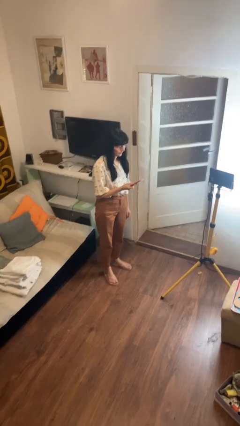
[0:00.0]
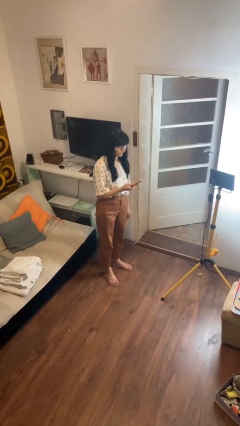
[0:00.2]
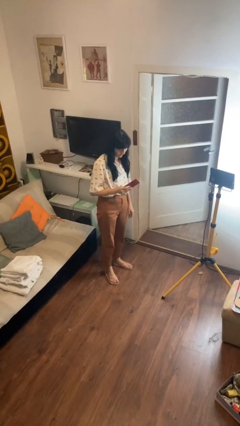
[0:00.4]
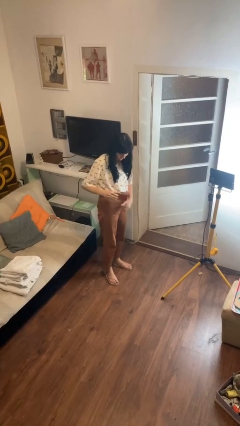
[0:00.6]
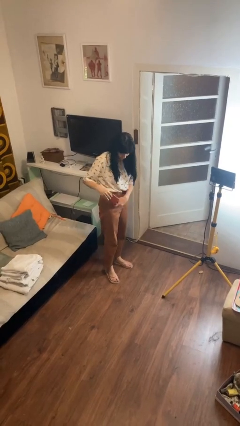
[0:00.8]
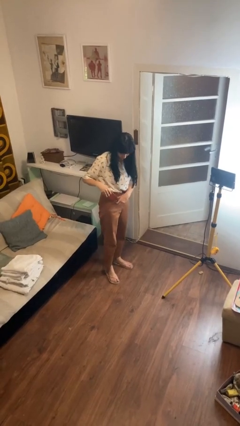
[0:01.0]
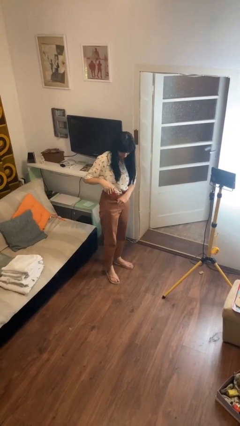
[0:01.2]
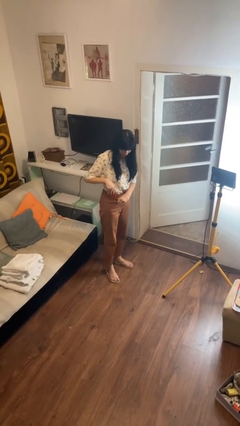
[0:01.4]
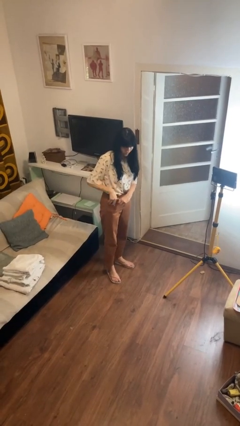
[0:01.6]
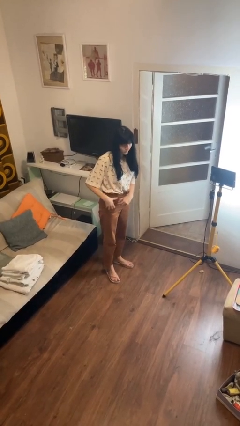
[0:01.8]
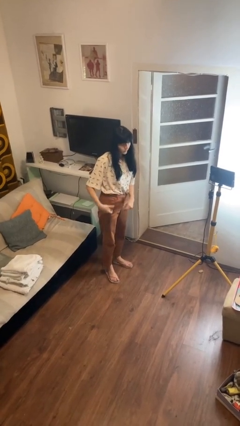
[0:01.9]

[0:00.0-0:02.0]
person puts phone into pocket

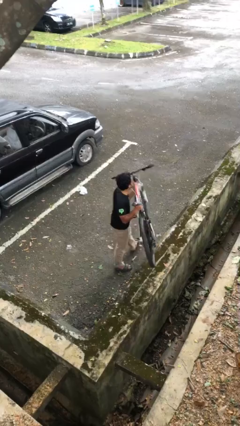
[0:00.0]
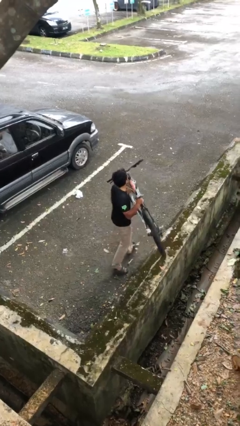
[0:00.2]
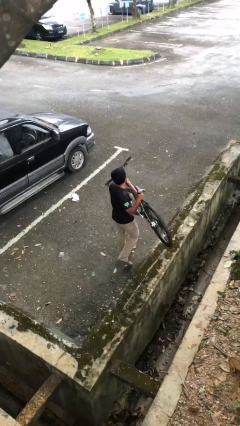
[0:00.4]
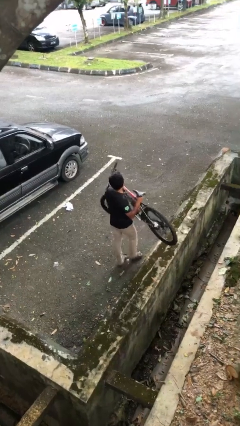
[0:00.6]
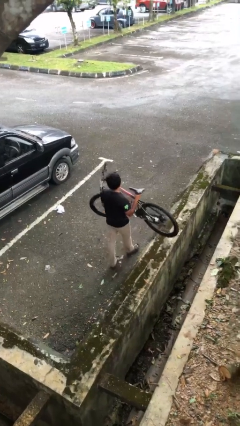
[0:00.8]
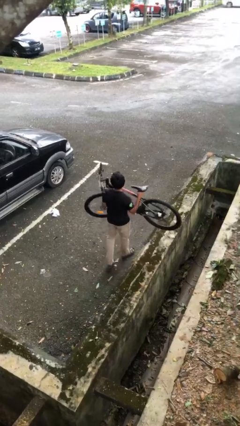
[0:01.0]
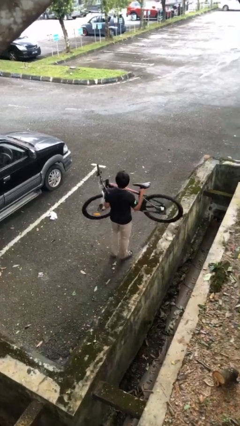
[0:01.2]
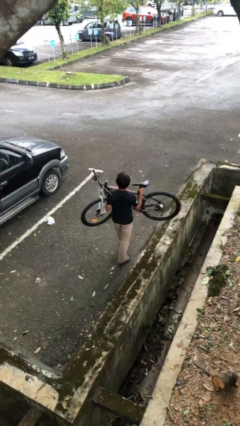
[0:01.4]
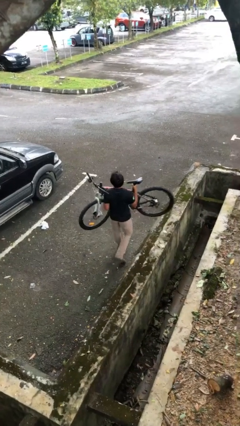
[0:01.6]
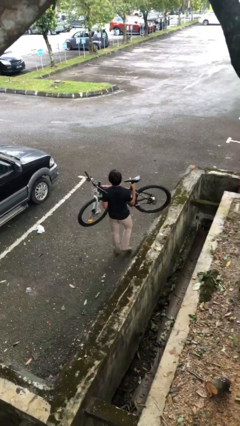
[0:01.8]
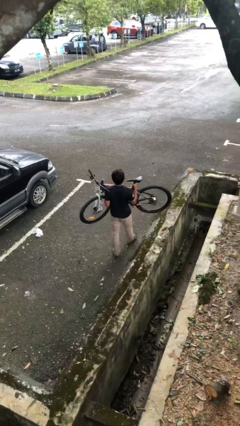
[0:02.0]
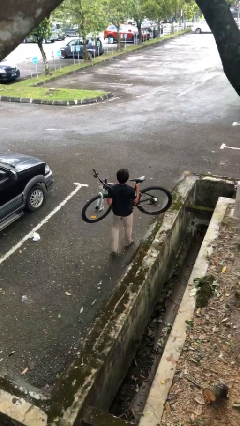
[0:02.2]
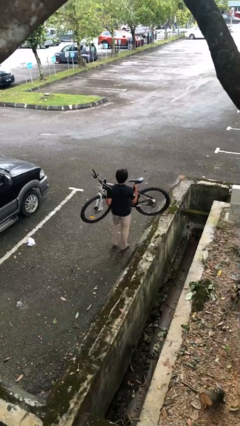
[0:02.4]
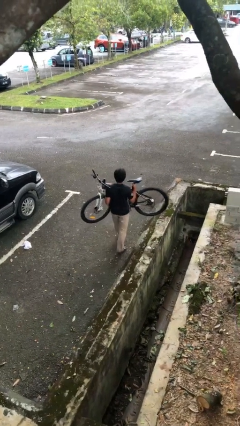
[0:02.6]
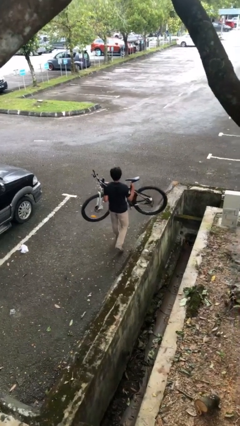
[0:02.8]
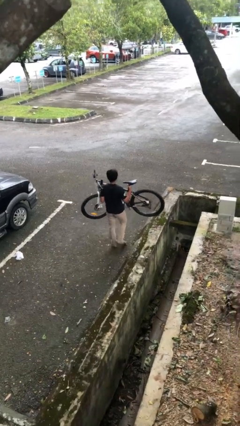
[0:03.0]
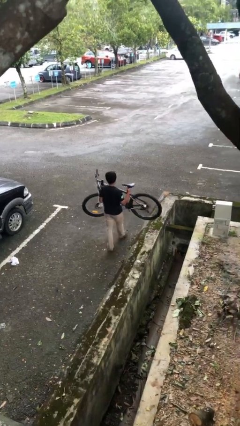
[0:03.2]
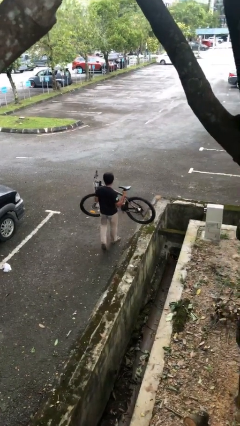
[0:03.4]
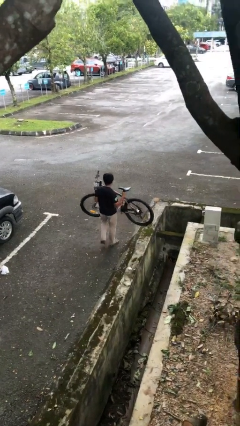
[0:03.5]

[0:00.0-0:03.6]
person carries heavy object

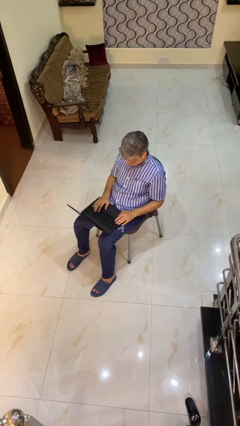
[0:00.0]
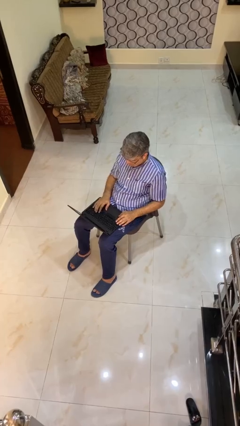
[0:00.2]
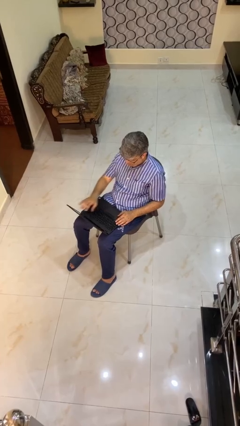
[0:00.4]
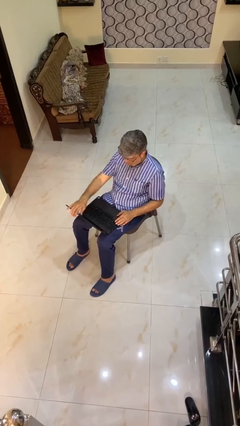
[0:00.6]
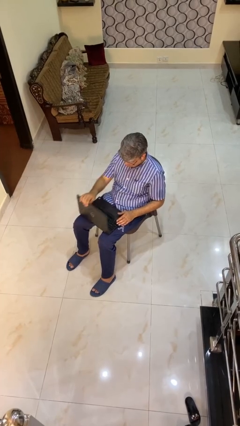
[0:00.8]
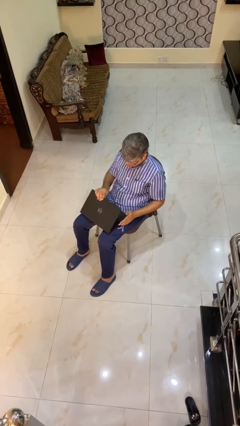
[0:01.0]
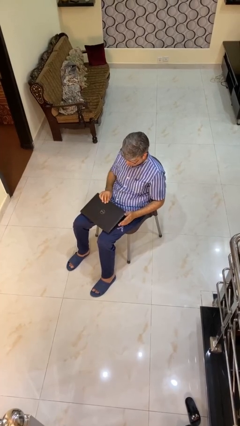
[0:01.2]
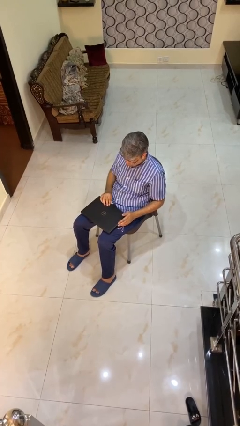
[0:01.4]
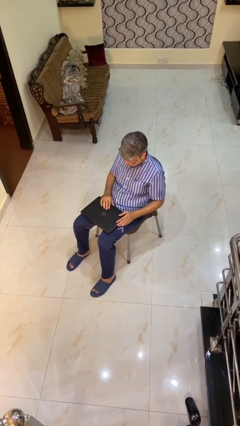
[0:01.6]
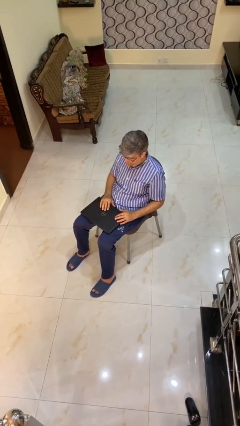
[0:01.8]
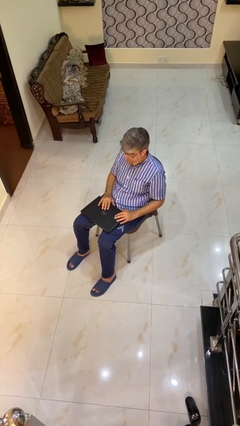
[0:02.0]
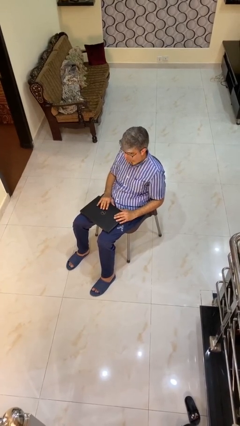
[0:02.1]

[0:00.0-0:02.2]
person closes laptop

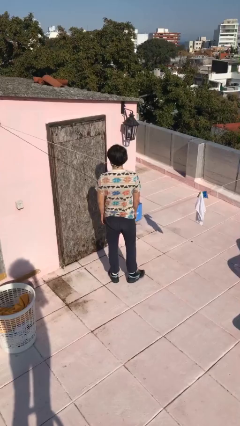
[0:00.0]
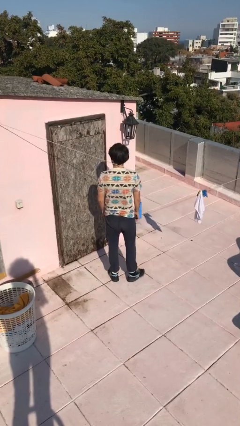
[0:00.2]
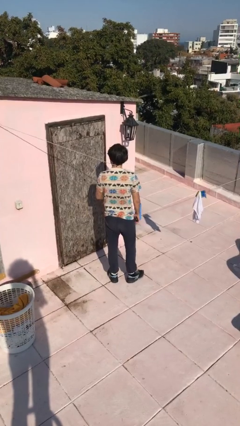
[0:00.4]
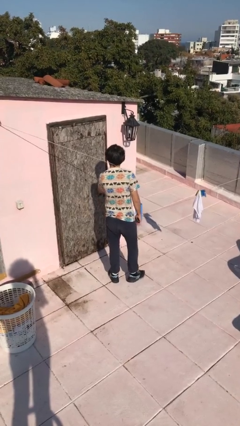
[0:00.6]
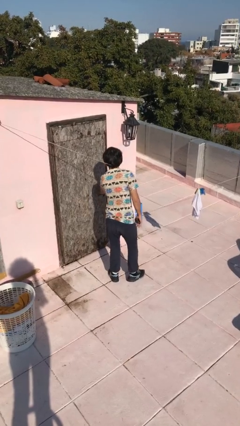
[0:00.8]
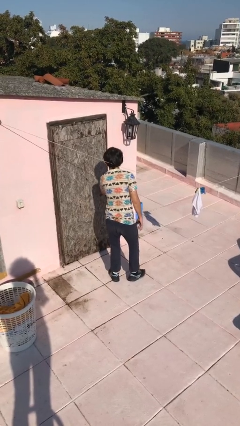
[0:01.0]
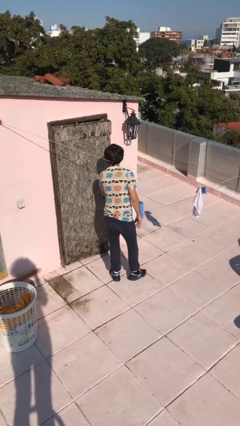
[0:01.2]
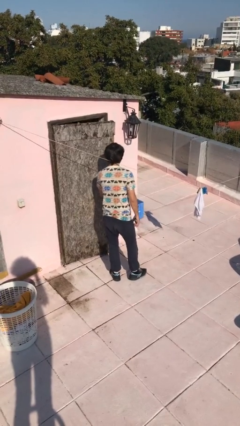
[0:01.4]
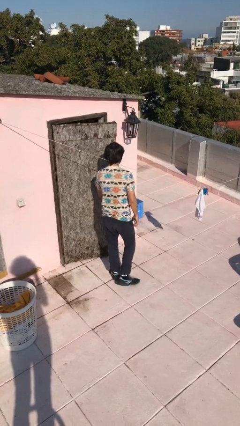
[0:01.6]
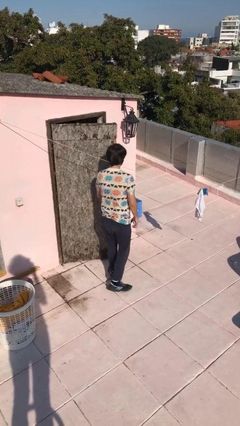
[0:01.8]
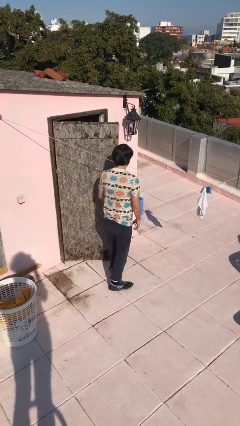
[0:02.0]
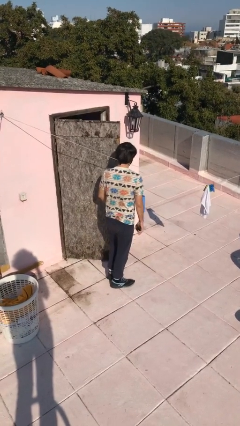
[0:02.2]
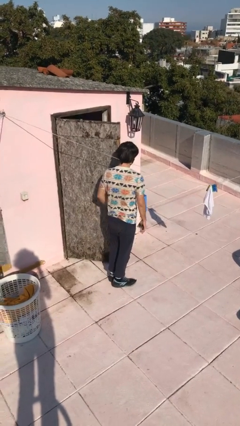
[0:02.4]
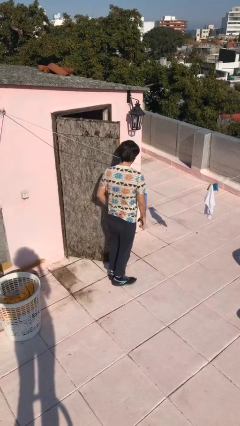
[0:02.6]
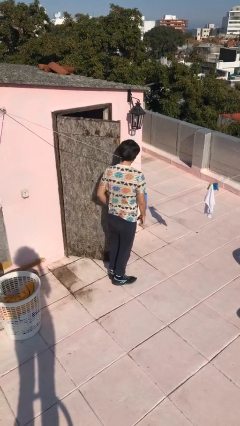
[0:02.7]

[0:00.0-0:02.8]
person opens facility door

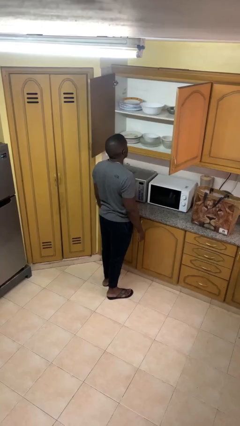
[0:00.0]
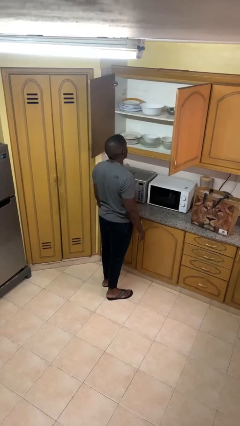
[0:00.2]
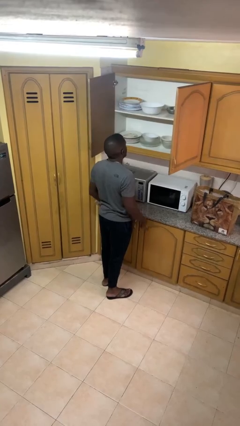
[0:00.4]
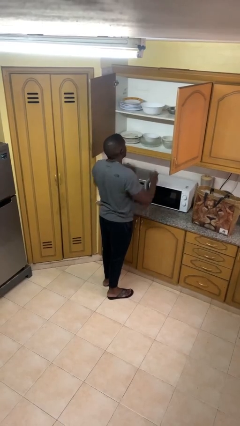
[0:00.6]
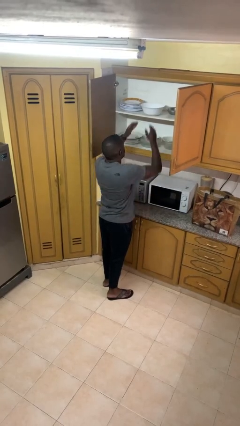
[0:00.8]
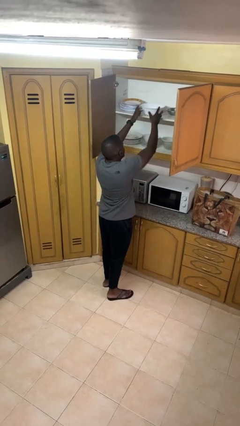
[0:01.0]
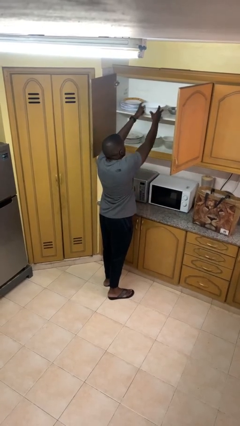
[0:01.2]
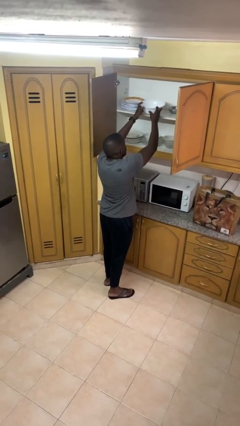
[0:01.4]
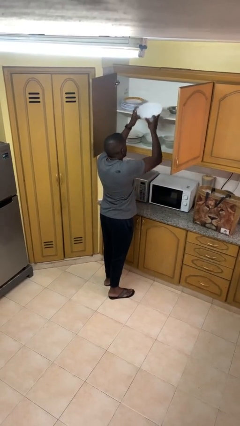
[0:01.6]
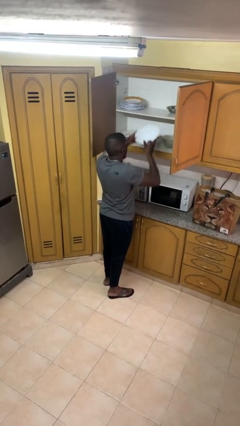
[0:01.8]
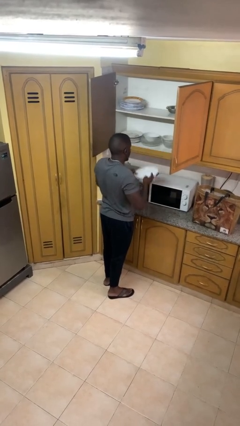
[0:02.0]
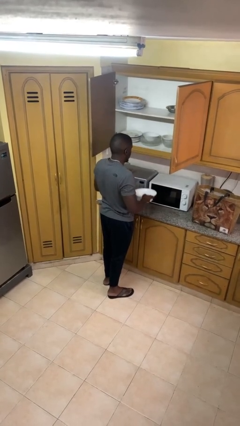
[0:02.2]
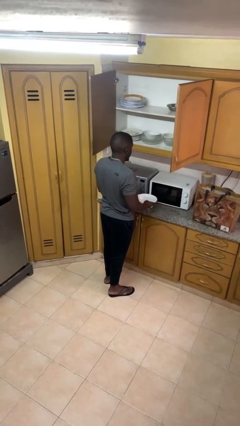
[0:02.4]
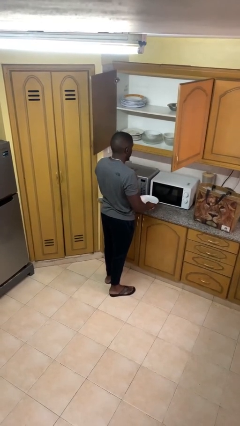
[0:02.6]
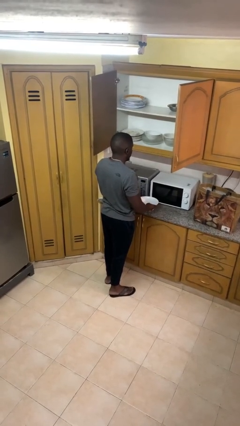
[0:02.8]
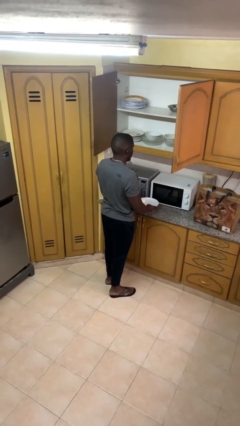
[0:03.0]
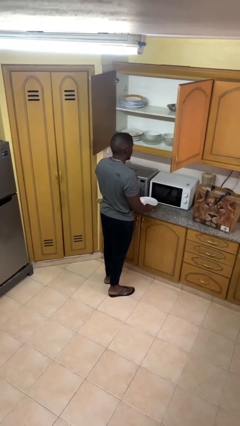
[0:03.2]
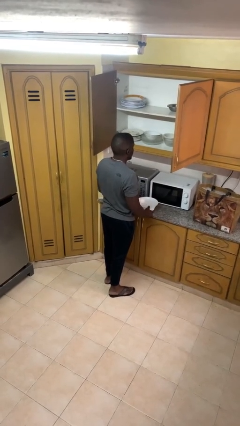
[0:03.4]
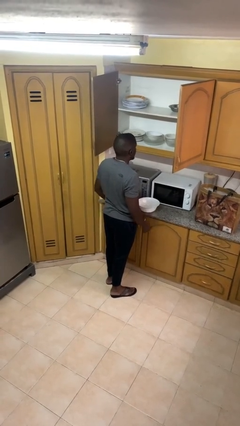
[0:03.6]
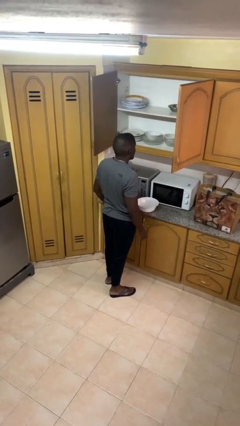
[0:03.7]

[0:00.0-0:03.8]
person takes object from cabinet

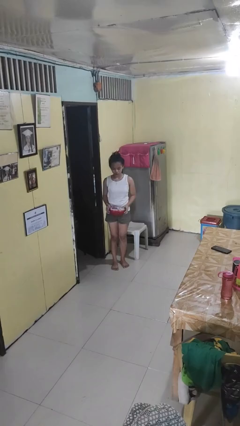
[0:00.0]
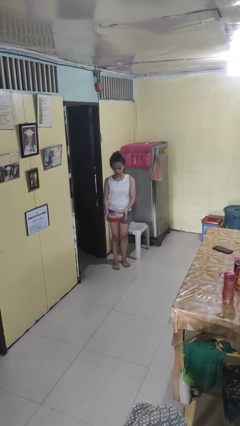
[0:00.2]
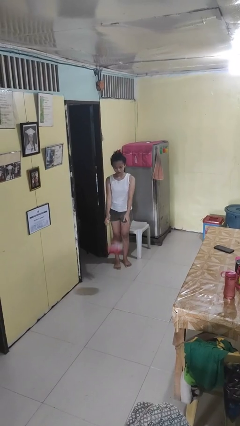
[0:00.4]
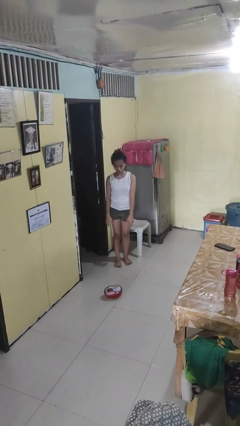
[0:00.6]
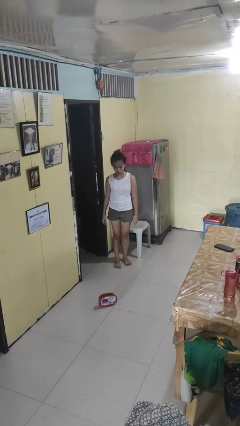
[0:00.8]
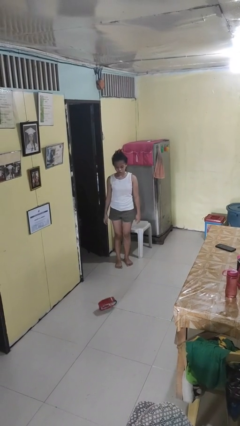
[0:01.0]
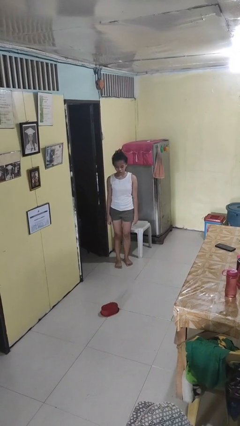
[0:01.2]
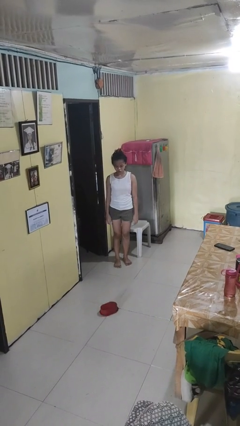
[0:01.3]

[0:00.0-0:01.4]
person throws object to ground

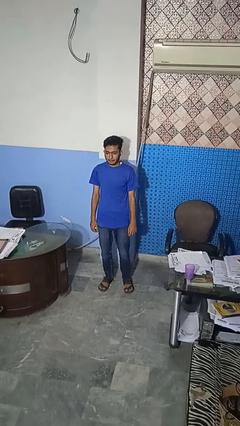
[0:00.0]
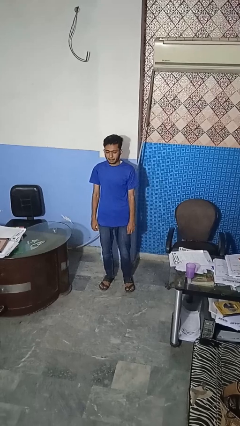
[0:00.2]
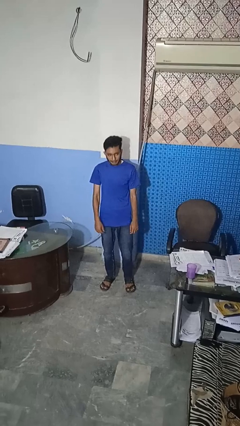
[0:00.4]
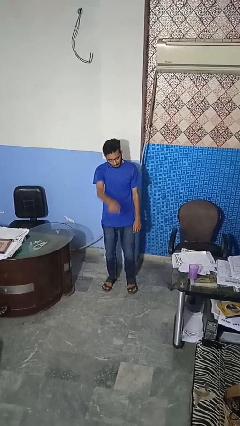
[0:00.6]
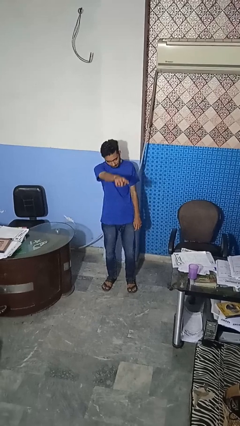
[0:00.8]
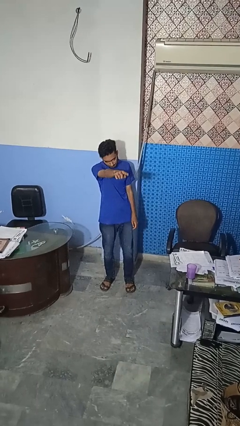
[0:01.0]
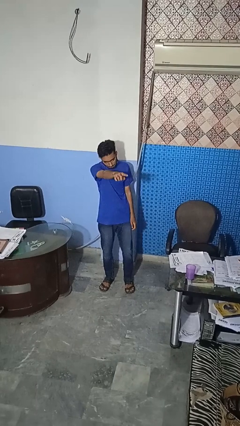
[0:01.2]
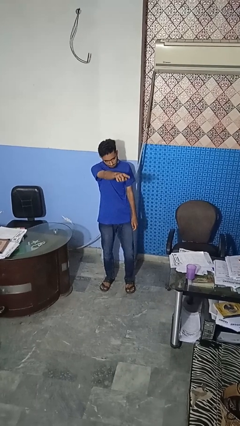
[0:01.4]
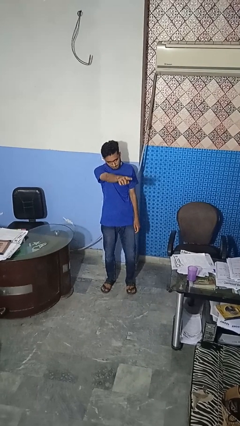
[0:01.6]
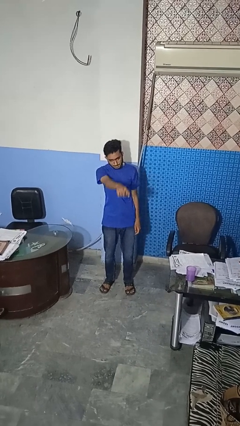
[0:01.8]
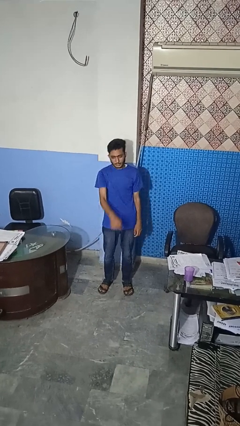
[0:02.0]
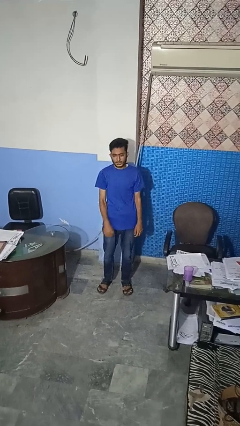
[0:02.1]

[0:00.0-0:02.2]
person points at person
